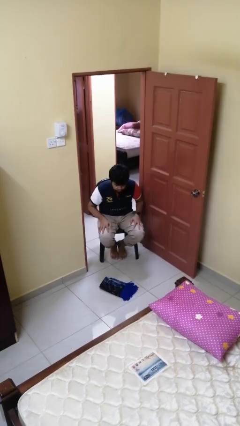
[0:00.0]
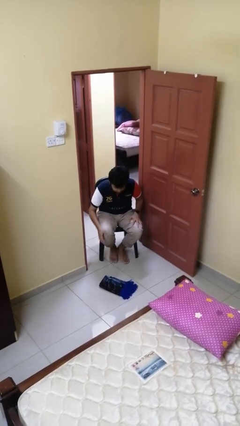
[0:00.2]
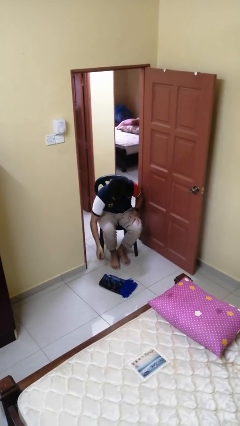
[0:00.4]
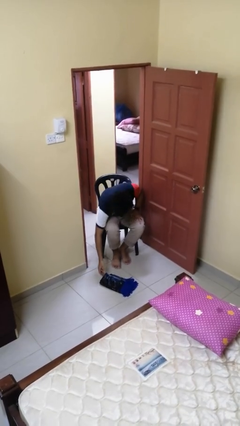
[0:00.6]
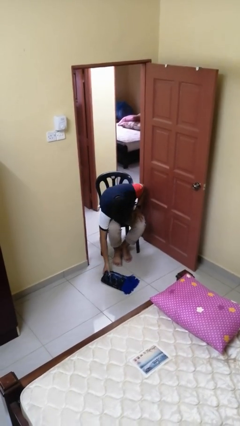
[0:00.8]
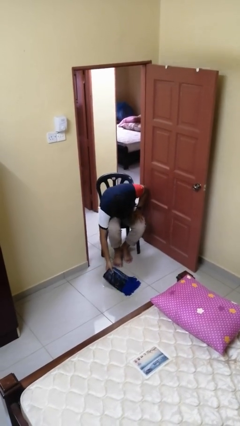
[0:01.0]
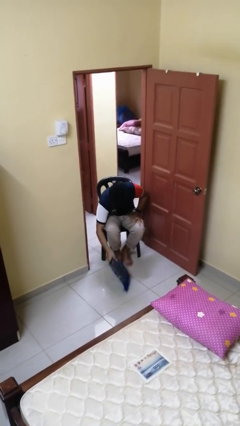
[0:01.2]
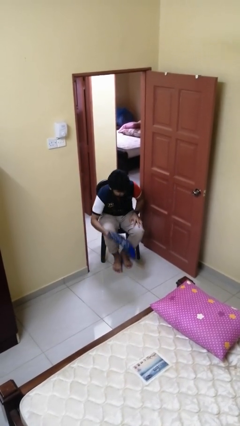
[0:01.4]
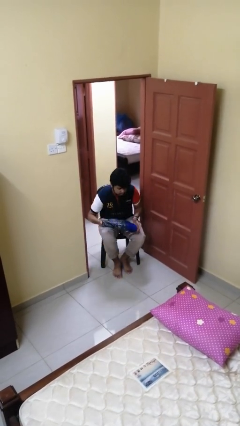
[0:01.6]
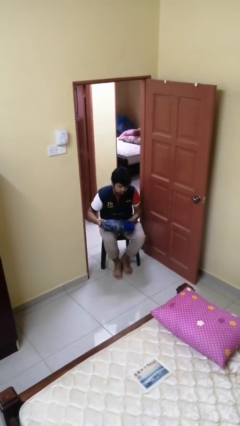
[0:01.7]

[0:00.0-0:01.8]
person picks up object from floor

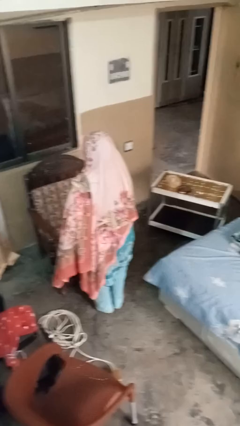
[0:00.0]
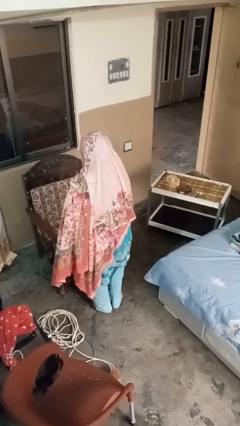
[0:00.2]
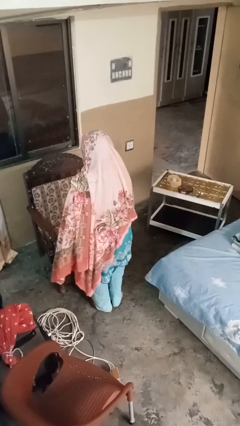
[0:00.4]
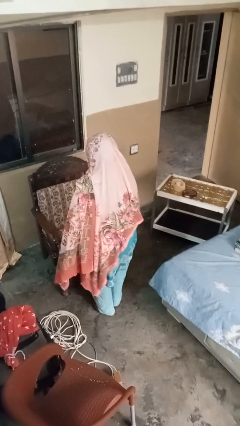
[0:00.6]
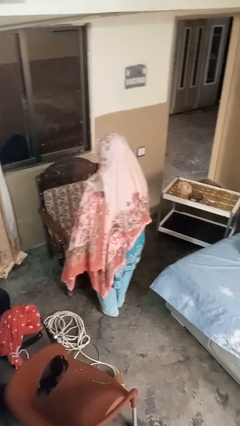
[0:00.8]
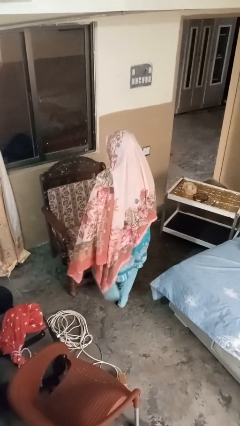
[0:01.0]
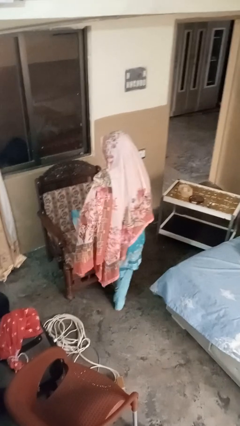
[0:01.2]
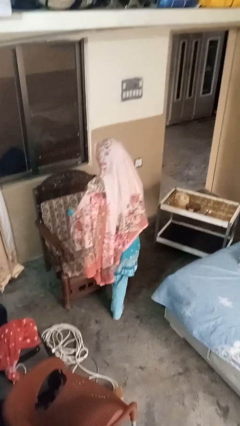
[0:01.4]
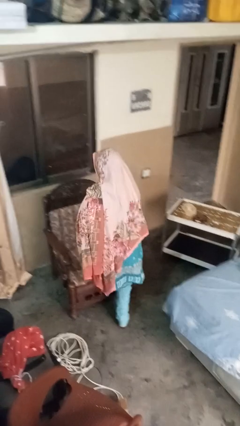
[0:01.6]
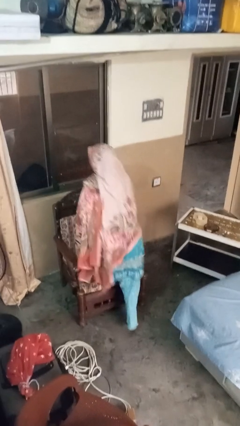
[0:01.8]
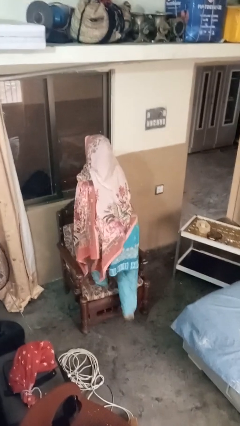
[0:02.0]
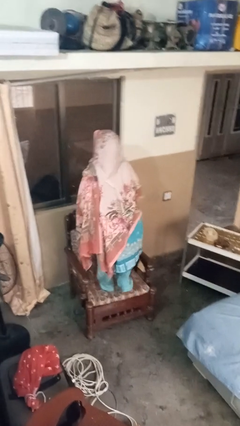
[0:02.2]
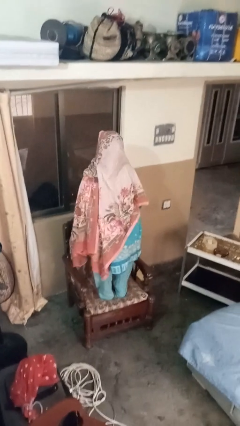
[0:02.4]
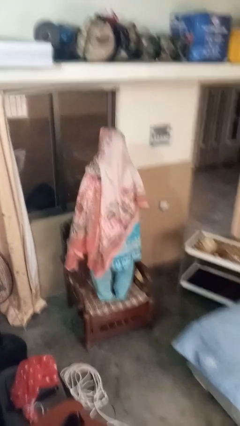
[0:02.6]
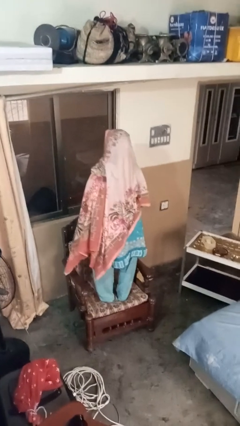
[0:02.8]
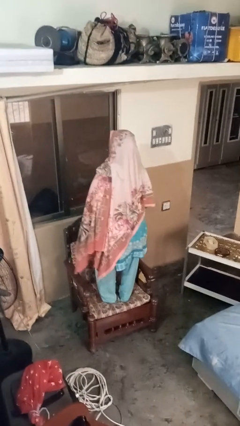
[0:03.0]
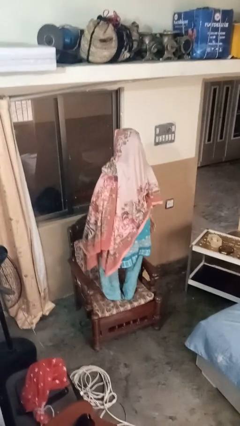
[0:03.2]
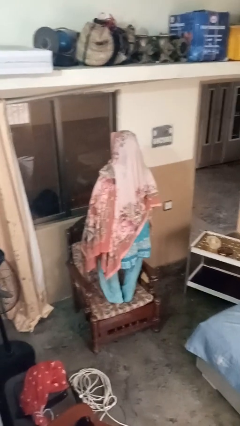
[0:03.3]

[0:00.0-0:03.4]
person climbs on couch

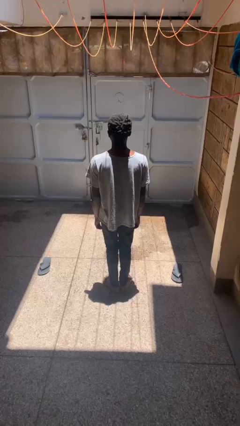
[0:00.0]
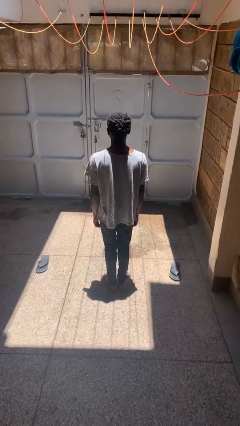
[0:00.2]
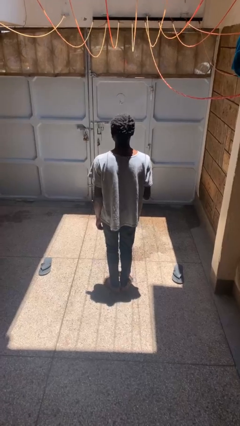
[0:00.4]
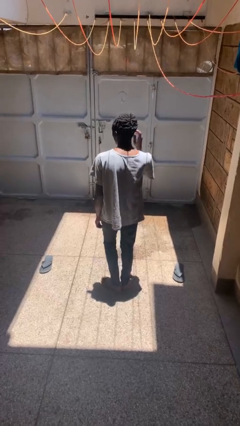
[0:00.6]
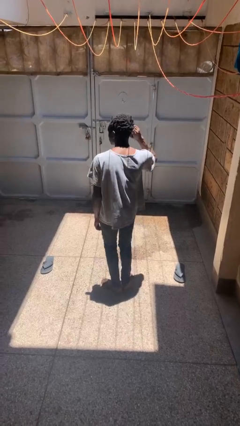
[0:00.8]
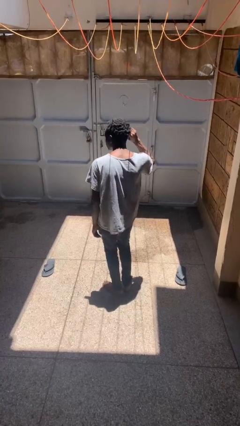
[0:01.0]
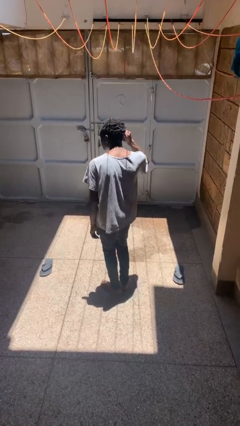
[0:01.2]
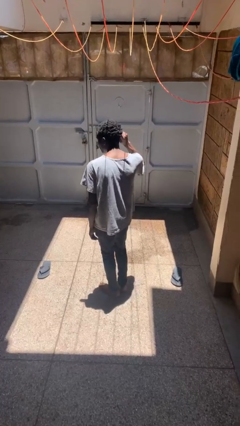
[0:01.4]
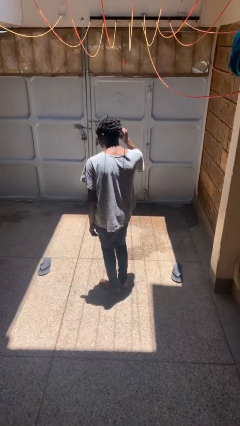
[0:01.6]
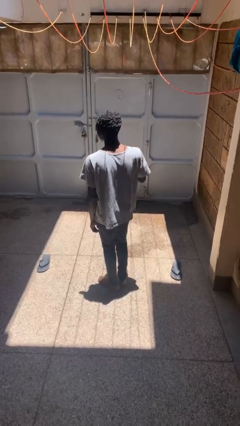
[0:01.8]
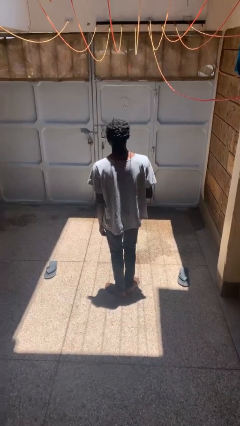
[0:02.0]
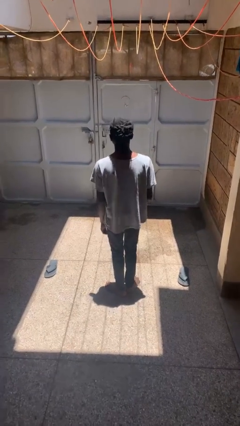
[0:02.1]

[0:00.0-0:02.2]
person touches earlobe

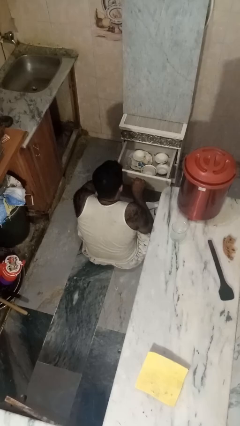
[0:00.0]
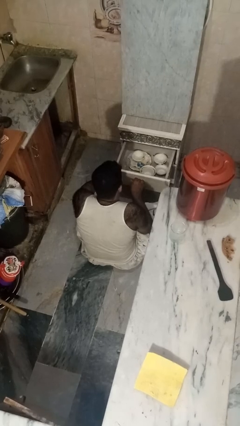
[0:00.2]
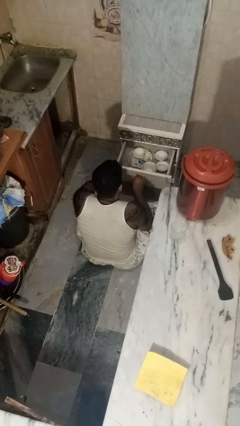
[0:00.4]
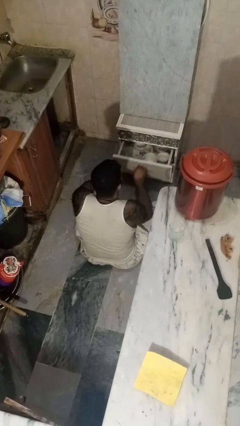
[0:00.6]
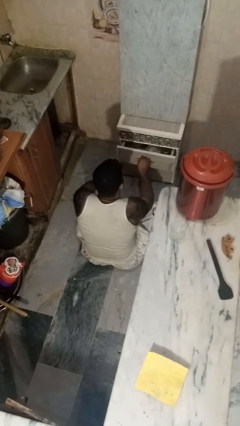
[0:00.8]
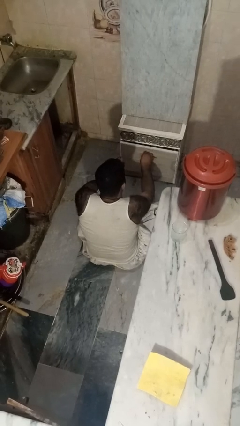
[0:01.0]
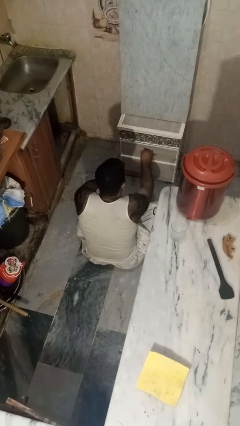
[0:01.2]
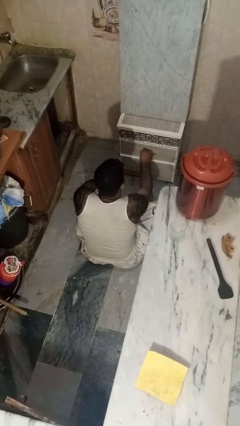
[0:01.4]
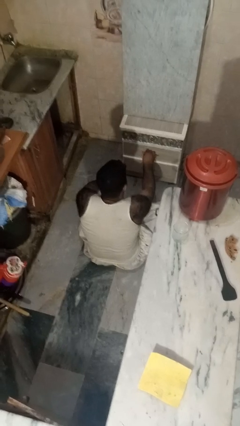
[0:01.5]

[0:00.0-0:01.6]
person closes kitchen drawer

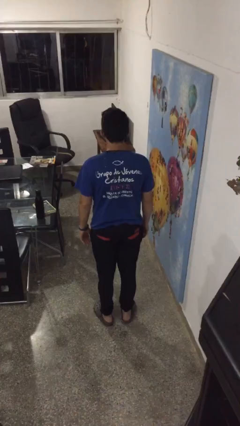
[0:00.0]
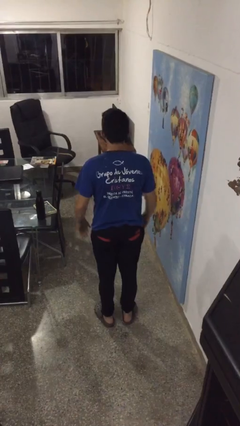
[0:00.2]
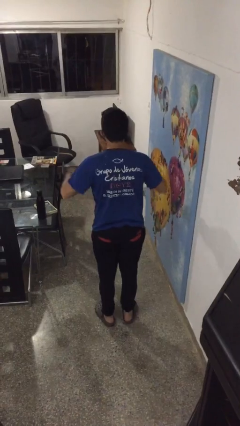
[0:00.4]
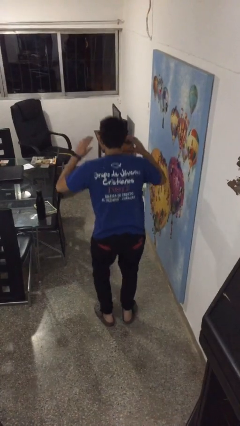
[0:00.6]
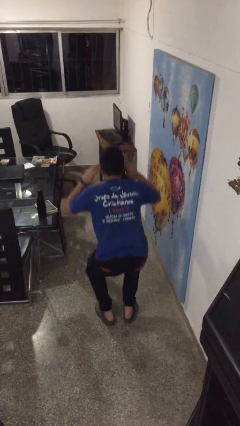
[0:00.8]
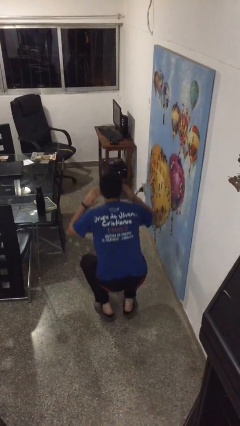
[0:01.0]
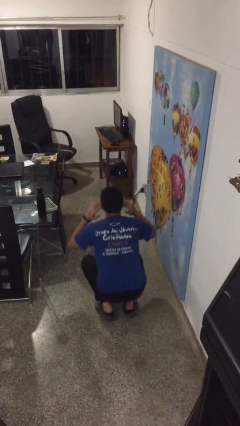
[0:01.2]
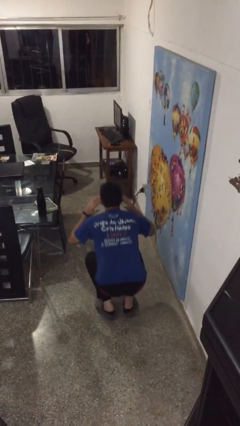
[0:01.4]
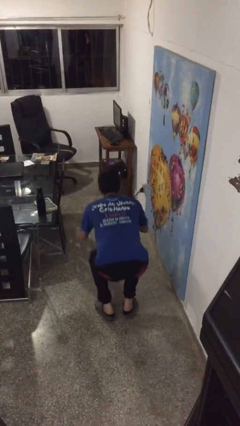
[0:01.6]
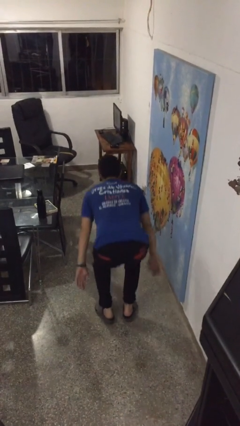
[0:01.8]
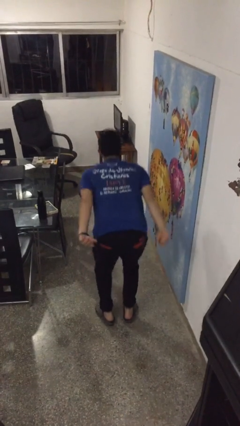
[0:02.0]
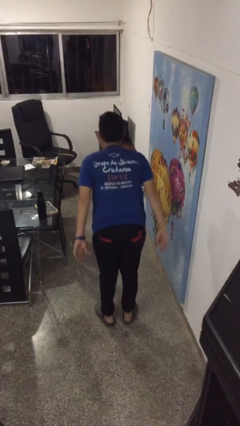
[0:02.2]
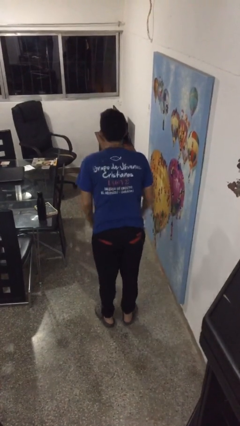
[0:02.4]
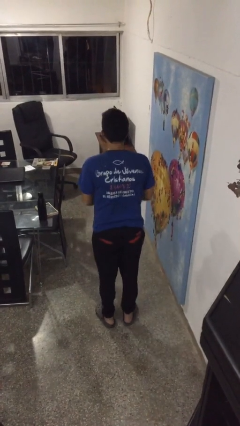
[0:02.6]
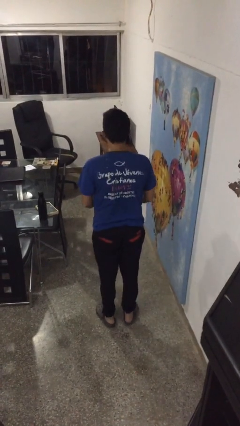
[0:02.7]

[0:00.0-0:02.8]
person exercises with situp

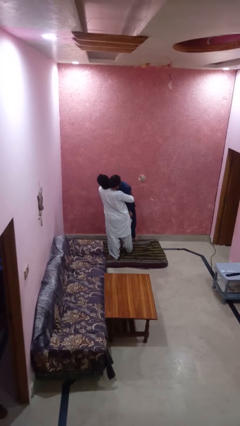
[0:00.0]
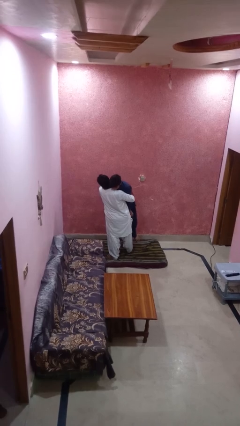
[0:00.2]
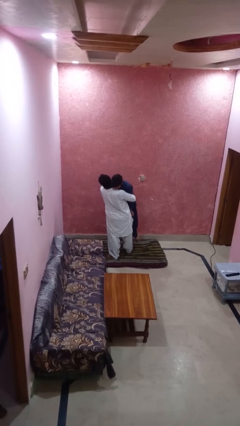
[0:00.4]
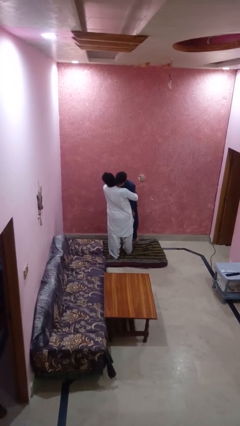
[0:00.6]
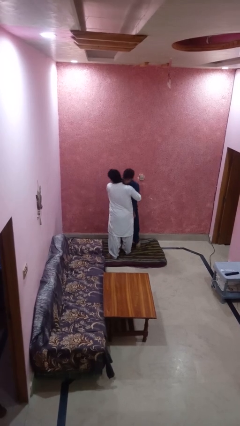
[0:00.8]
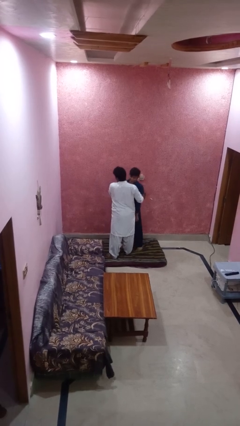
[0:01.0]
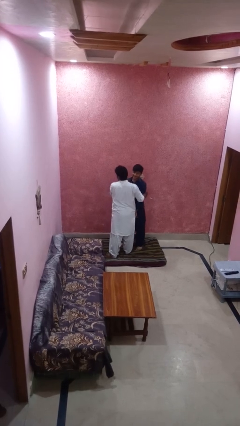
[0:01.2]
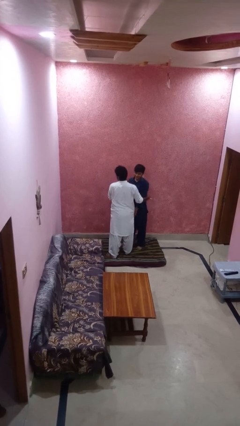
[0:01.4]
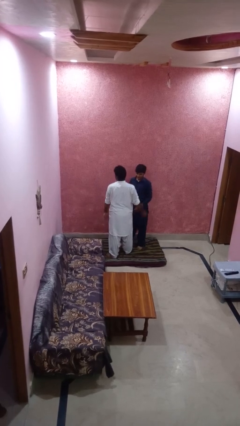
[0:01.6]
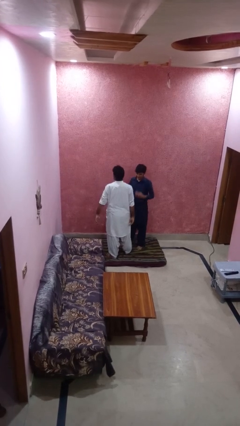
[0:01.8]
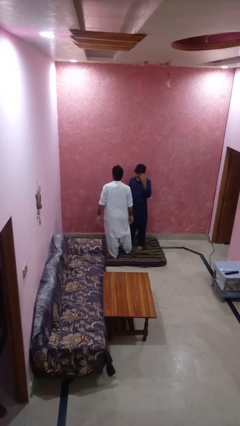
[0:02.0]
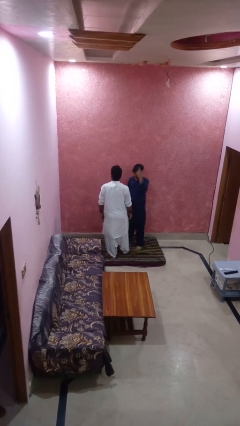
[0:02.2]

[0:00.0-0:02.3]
person puts down person

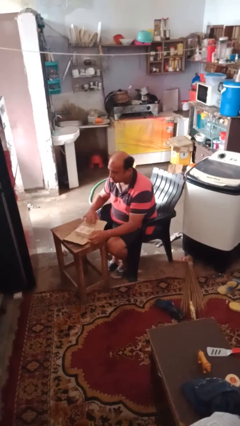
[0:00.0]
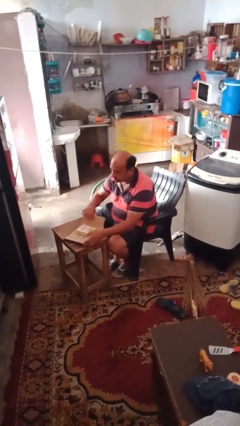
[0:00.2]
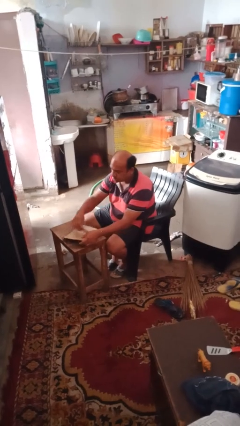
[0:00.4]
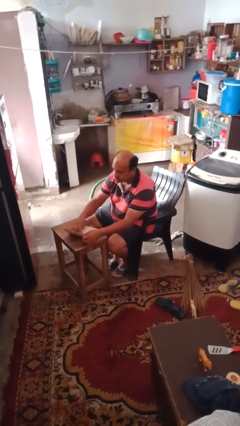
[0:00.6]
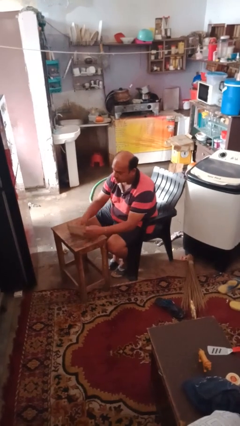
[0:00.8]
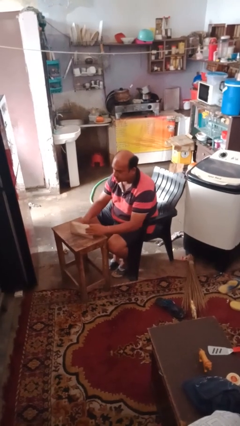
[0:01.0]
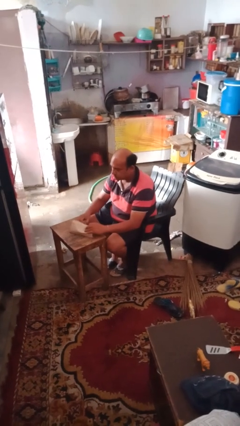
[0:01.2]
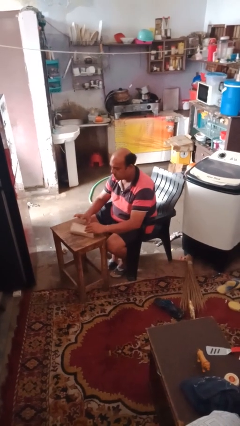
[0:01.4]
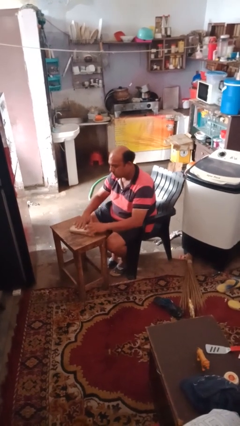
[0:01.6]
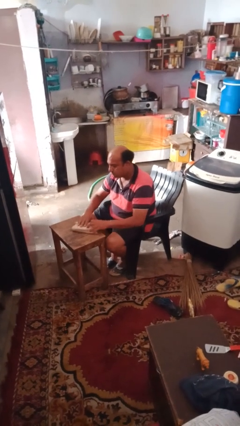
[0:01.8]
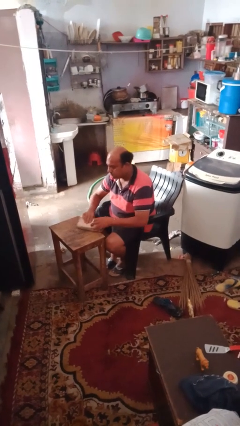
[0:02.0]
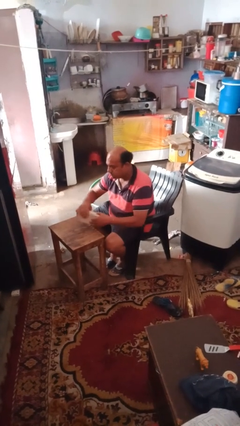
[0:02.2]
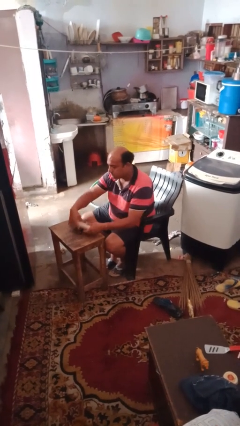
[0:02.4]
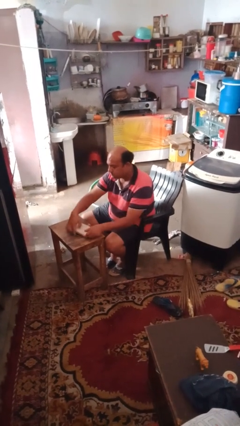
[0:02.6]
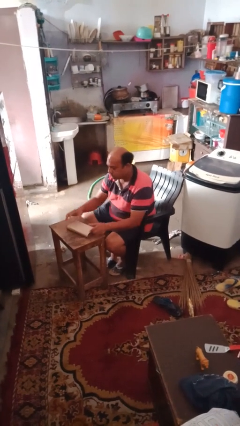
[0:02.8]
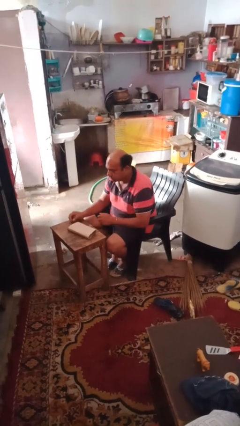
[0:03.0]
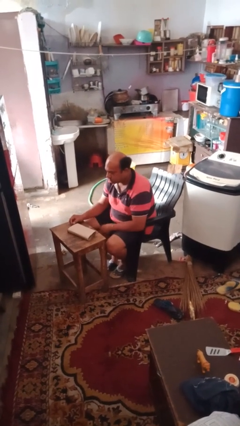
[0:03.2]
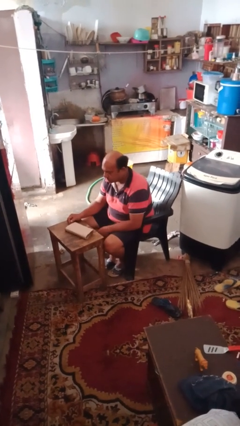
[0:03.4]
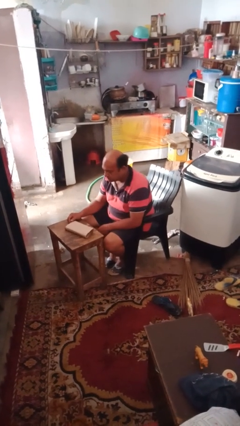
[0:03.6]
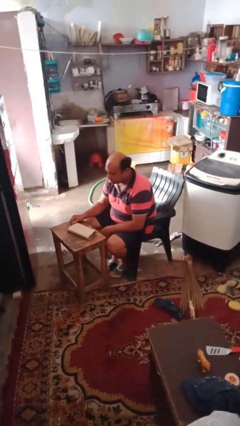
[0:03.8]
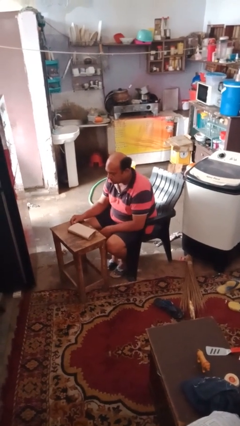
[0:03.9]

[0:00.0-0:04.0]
person wraps box
